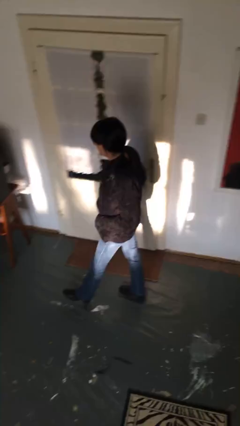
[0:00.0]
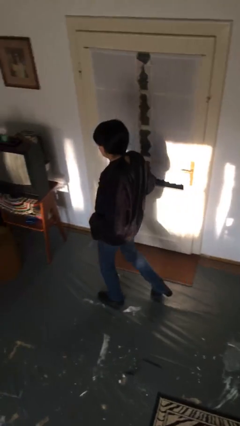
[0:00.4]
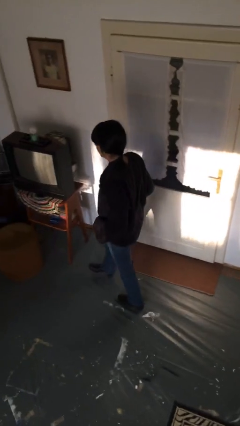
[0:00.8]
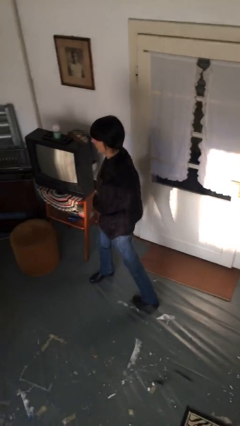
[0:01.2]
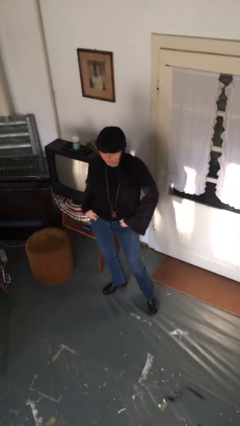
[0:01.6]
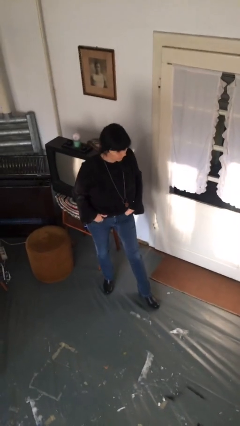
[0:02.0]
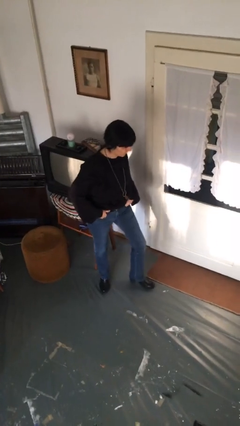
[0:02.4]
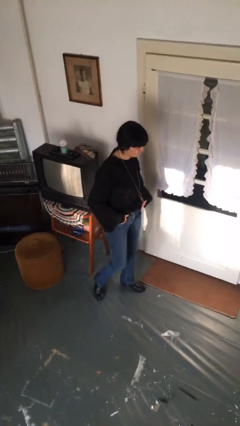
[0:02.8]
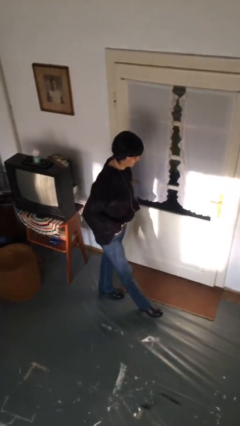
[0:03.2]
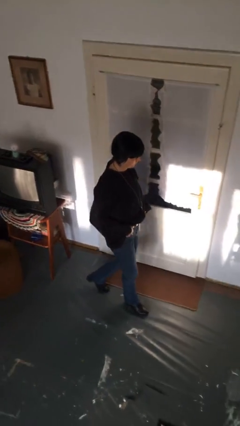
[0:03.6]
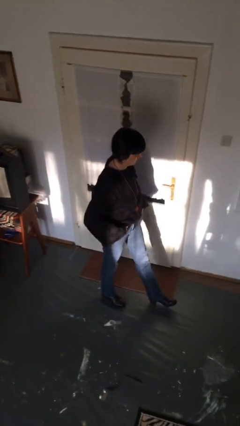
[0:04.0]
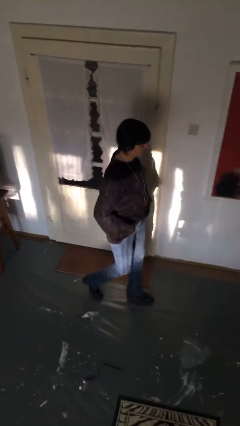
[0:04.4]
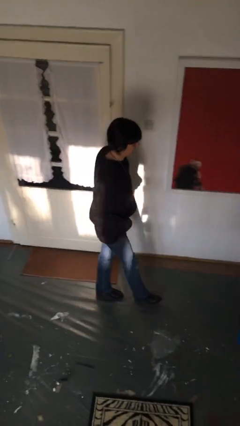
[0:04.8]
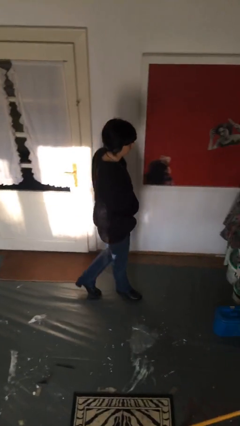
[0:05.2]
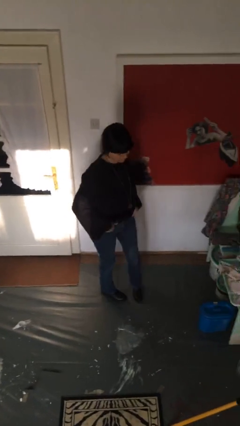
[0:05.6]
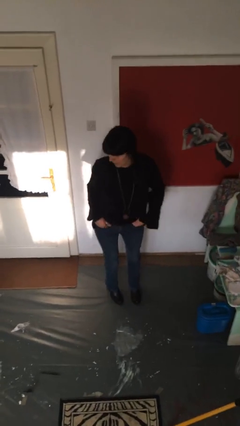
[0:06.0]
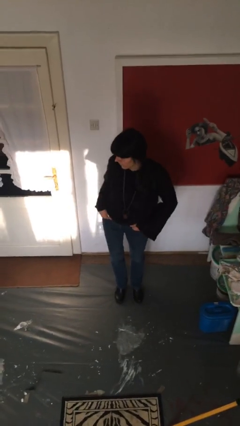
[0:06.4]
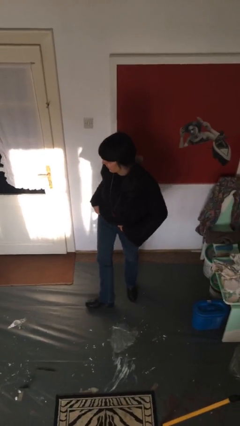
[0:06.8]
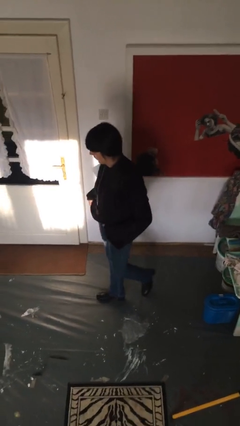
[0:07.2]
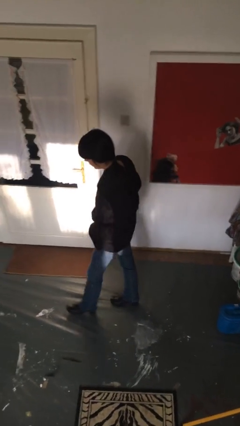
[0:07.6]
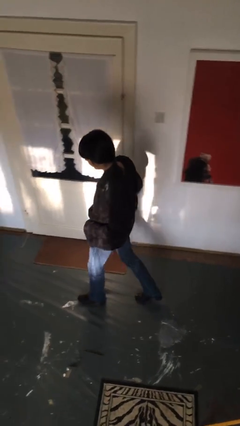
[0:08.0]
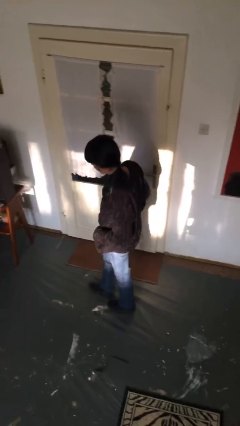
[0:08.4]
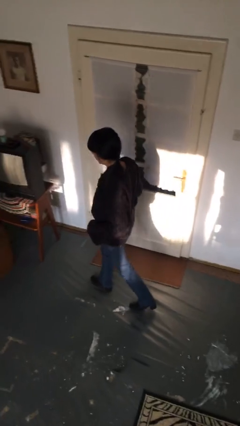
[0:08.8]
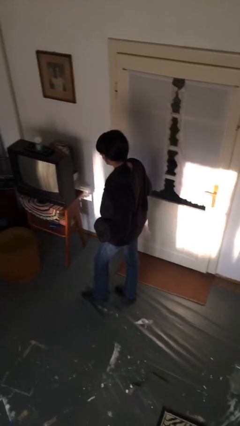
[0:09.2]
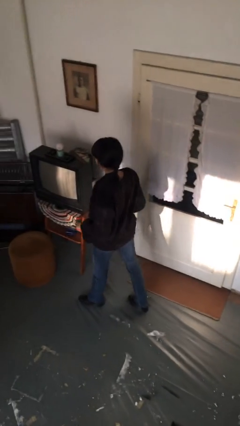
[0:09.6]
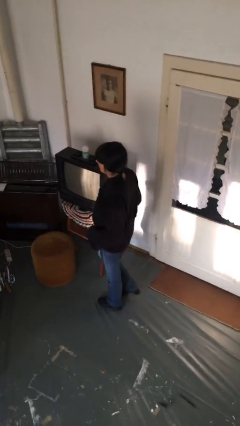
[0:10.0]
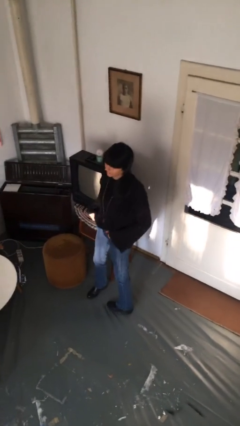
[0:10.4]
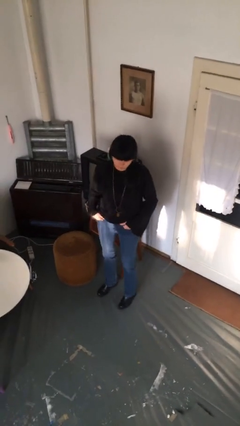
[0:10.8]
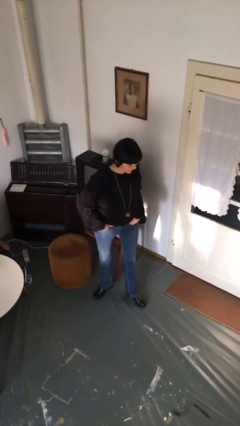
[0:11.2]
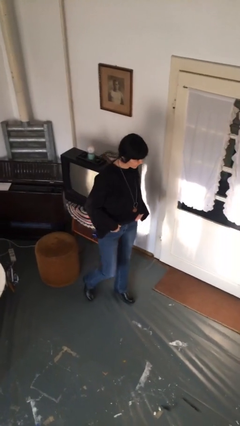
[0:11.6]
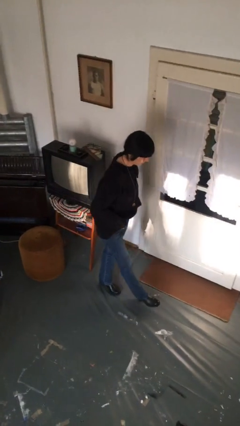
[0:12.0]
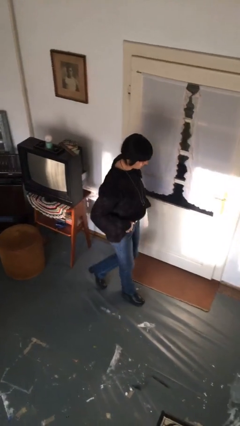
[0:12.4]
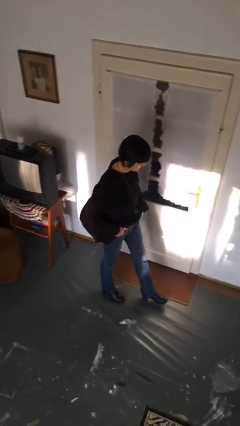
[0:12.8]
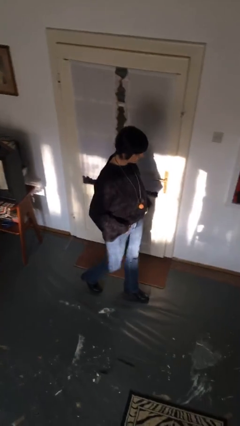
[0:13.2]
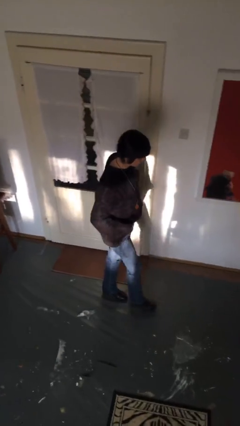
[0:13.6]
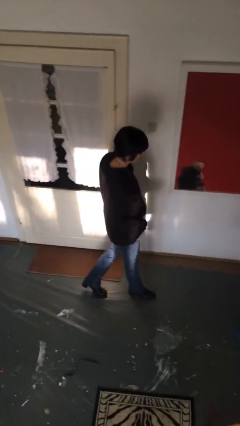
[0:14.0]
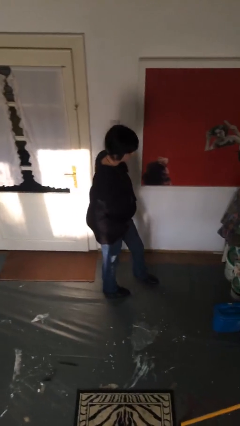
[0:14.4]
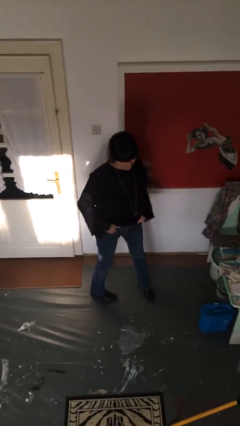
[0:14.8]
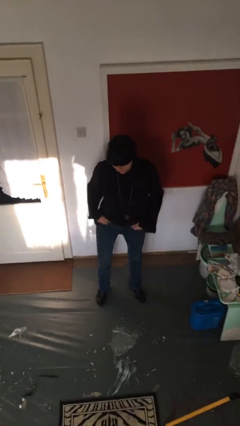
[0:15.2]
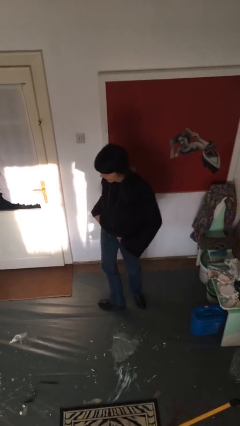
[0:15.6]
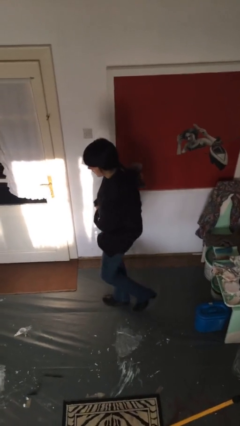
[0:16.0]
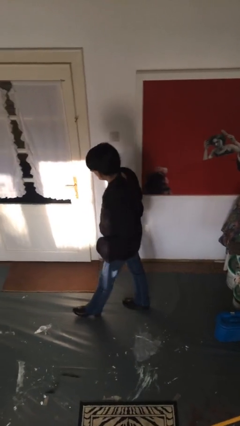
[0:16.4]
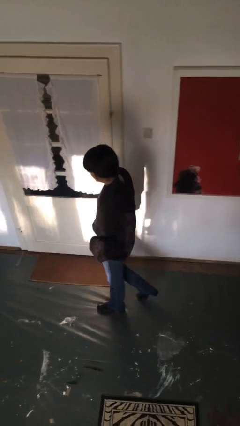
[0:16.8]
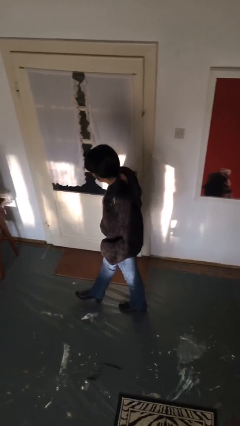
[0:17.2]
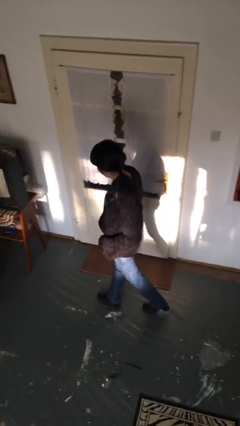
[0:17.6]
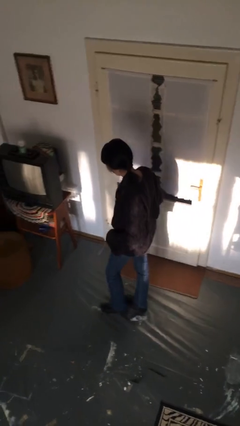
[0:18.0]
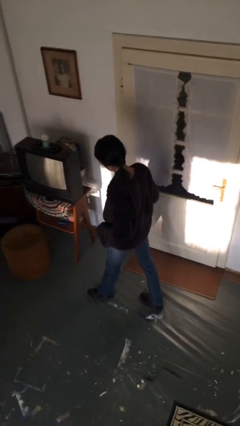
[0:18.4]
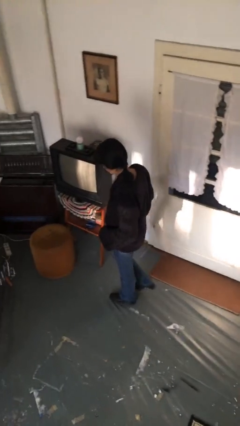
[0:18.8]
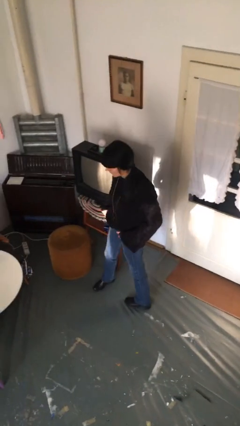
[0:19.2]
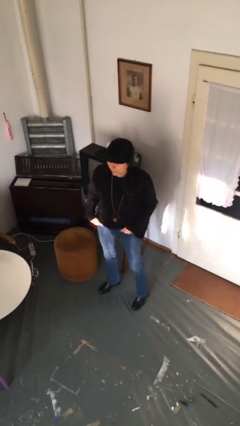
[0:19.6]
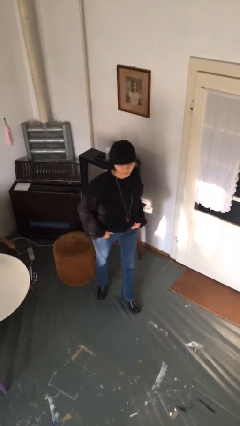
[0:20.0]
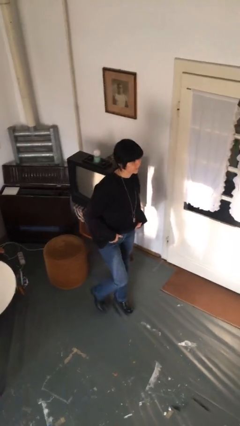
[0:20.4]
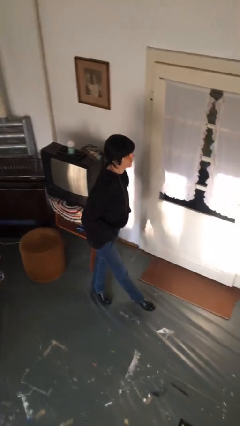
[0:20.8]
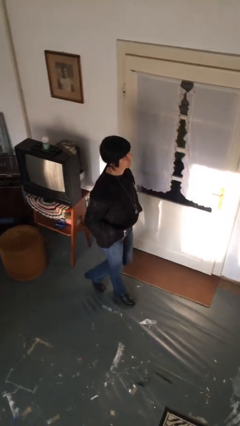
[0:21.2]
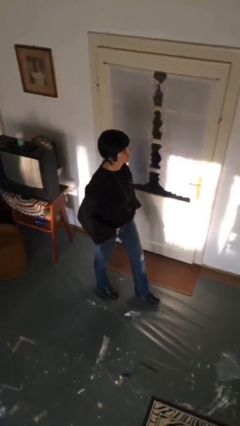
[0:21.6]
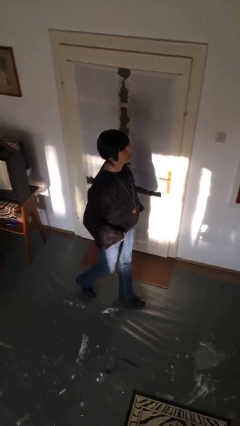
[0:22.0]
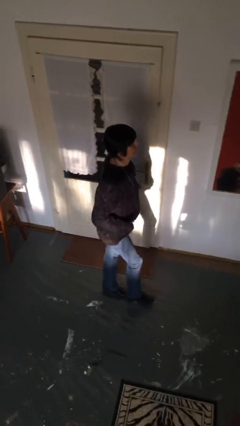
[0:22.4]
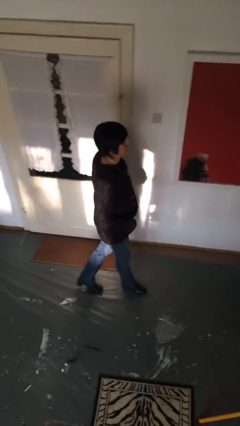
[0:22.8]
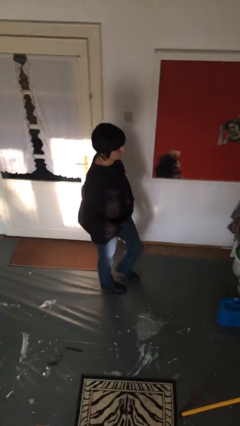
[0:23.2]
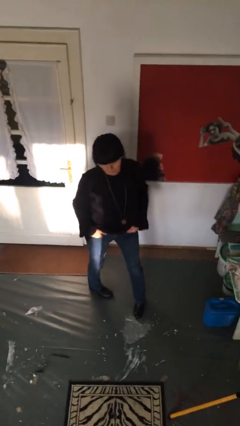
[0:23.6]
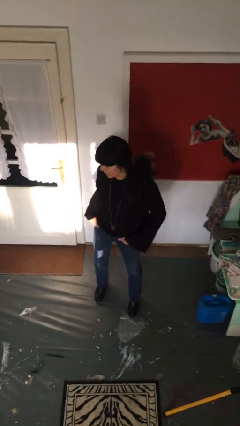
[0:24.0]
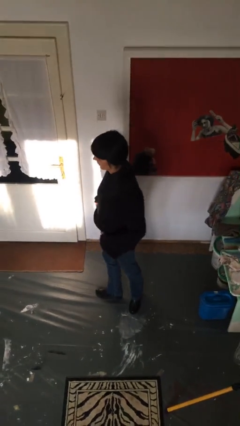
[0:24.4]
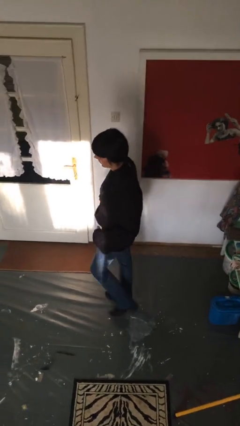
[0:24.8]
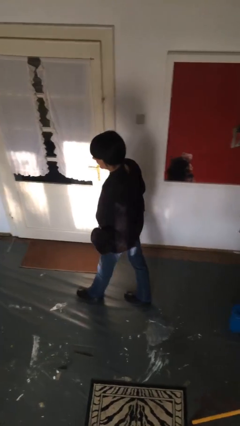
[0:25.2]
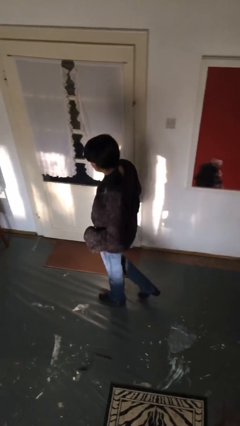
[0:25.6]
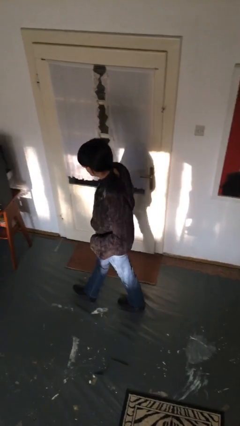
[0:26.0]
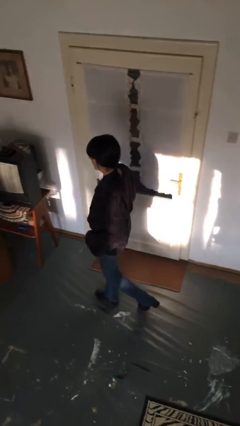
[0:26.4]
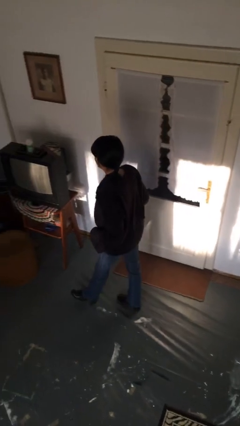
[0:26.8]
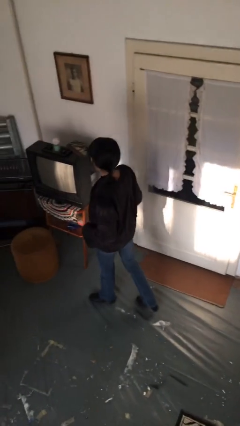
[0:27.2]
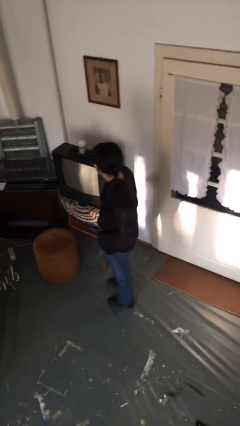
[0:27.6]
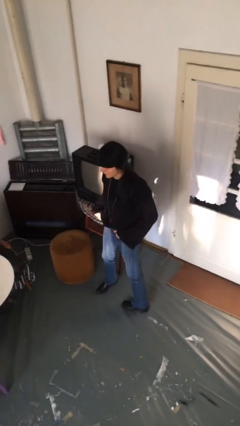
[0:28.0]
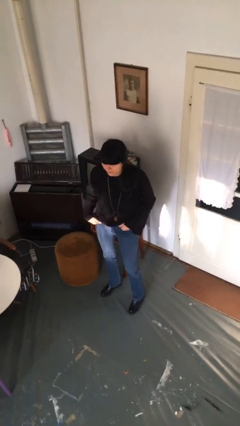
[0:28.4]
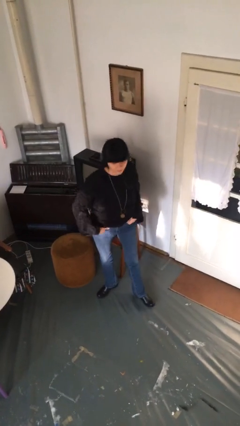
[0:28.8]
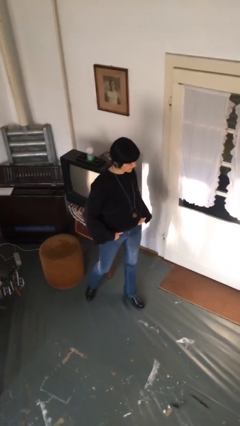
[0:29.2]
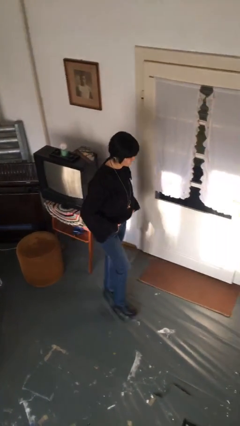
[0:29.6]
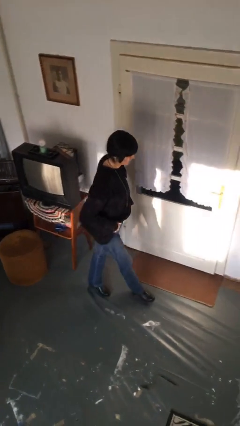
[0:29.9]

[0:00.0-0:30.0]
person walks

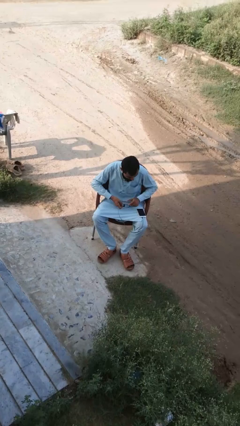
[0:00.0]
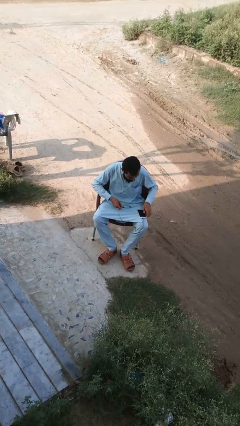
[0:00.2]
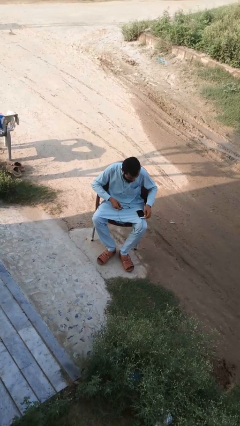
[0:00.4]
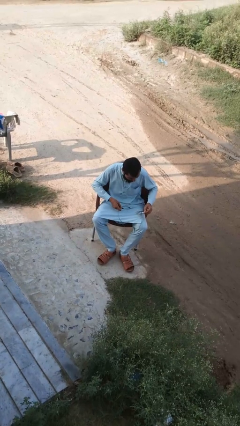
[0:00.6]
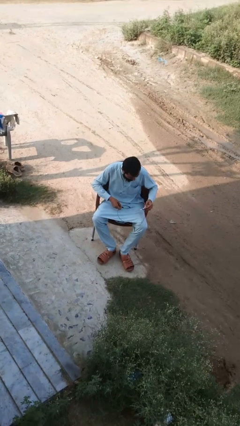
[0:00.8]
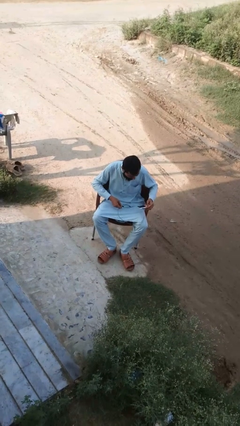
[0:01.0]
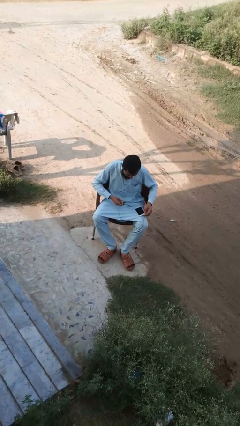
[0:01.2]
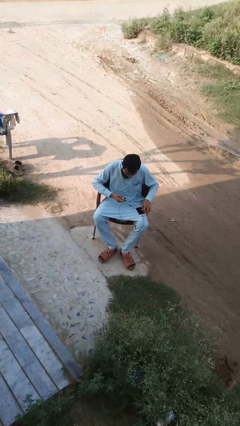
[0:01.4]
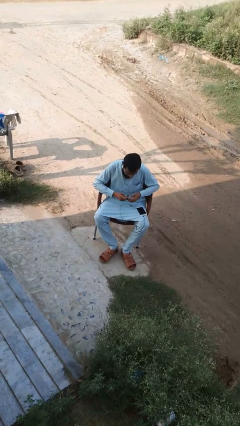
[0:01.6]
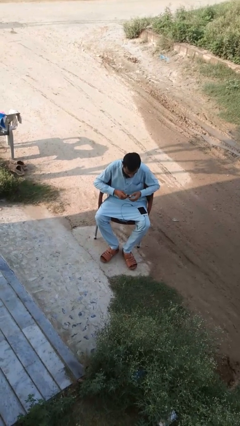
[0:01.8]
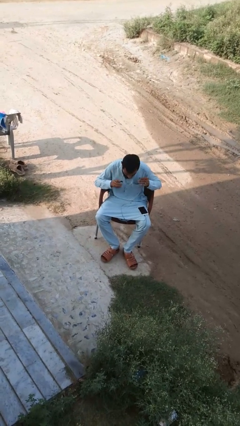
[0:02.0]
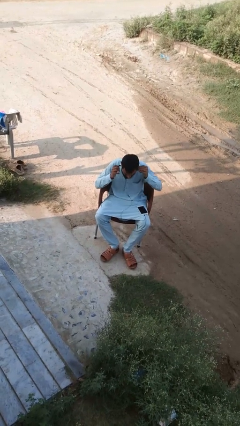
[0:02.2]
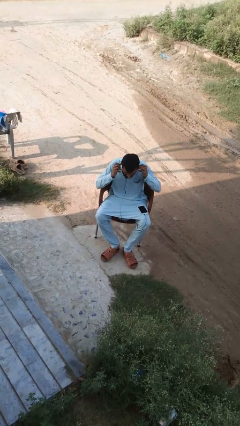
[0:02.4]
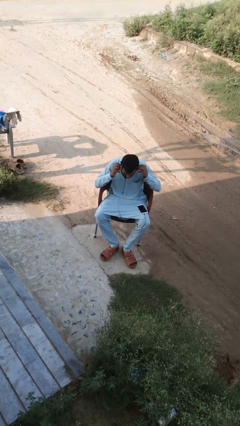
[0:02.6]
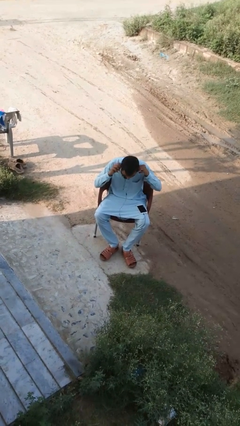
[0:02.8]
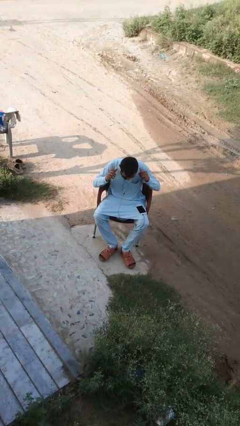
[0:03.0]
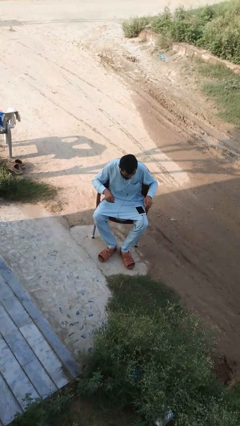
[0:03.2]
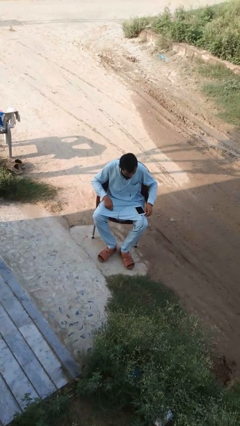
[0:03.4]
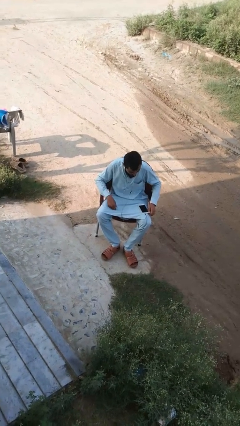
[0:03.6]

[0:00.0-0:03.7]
person puts on headphones
